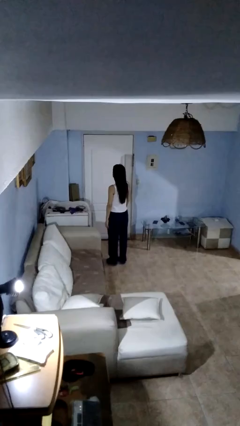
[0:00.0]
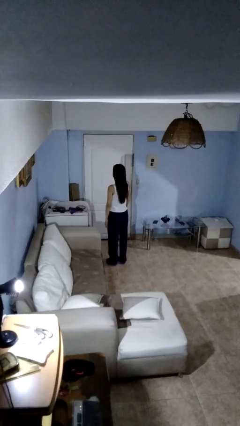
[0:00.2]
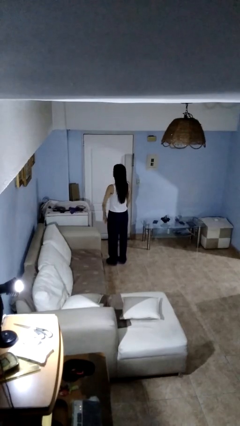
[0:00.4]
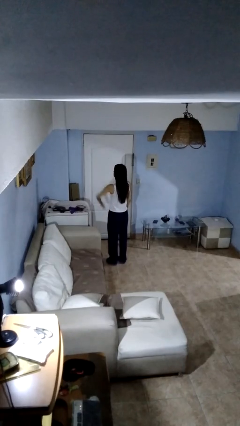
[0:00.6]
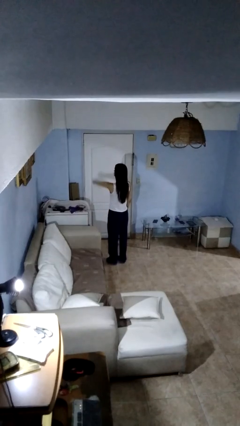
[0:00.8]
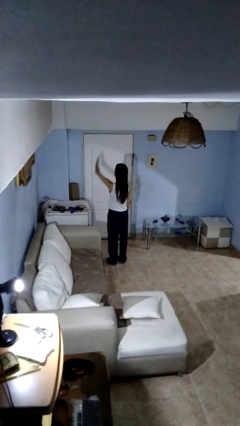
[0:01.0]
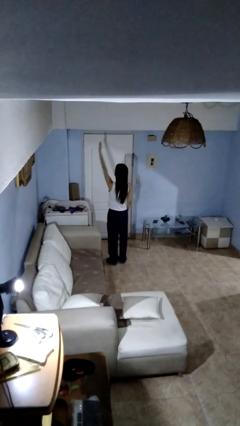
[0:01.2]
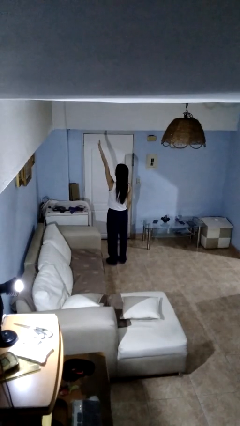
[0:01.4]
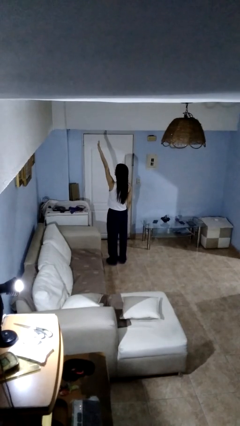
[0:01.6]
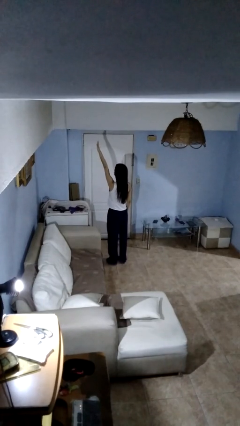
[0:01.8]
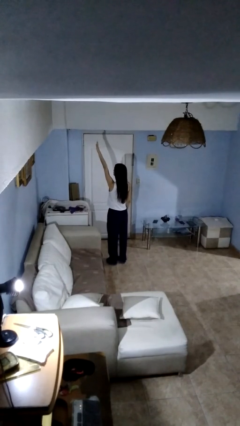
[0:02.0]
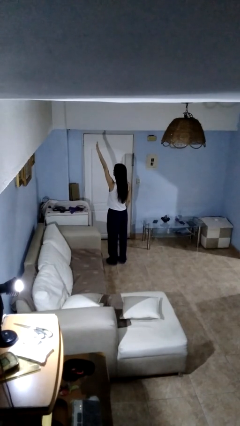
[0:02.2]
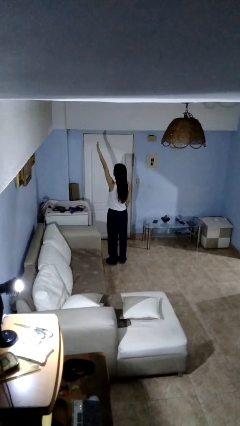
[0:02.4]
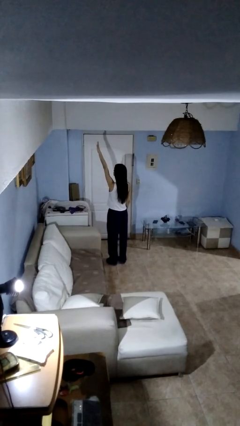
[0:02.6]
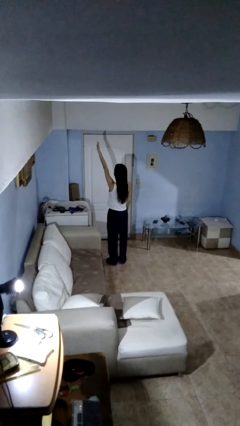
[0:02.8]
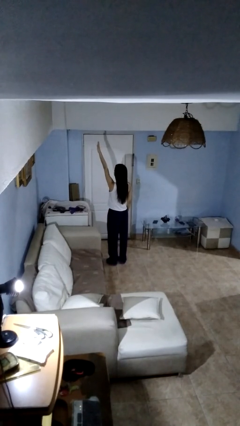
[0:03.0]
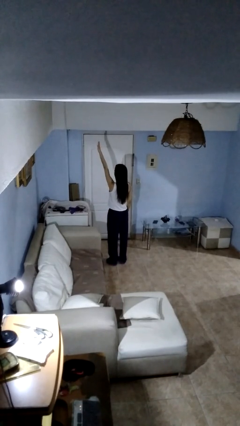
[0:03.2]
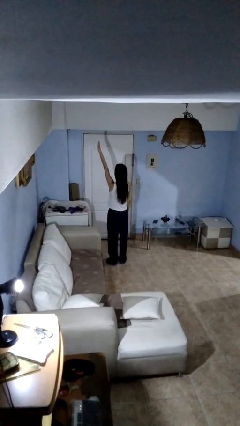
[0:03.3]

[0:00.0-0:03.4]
person gestures swipe up

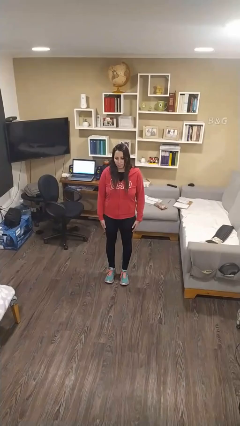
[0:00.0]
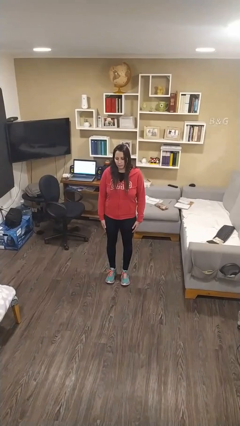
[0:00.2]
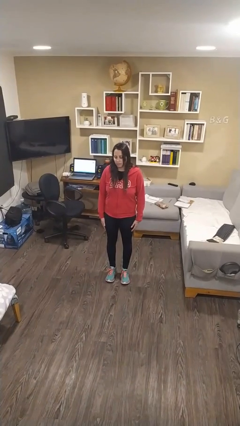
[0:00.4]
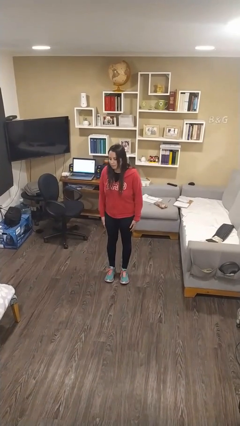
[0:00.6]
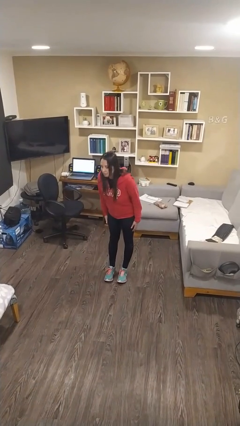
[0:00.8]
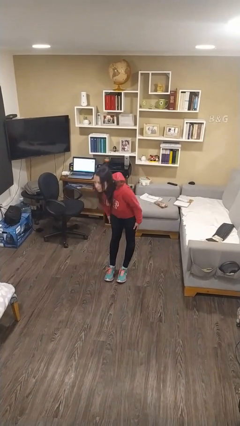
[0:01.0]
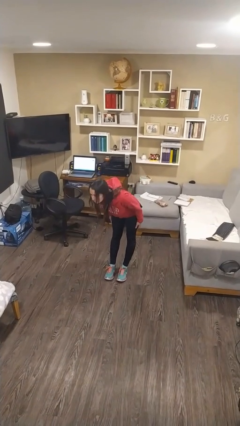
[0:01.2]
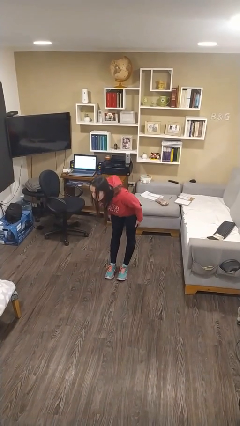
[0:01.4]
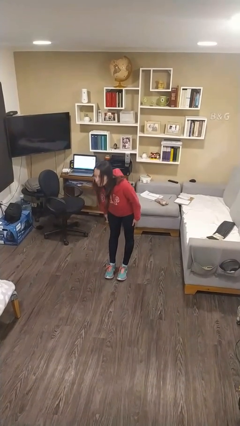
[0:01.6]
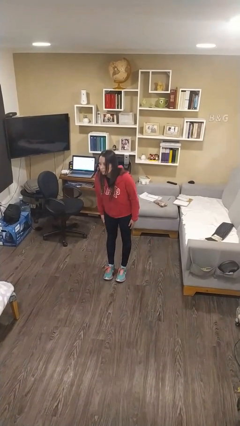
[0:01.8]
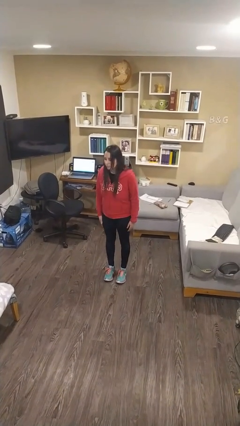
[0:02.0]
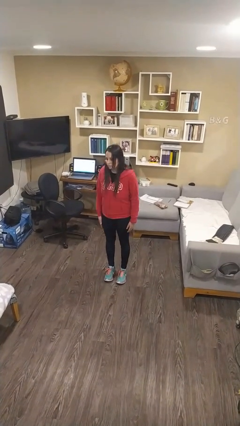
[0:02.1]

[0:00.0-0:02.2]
person bows

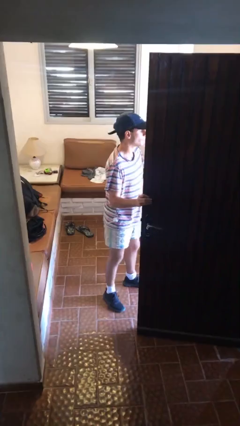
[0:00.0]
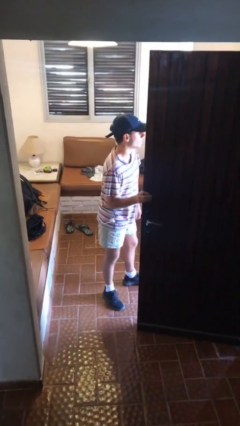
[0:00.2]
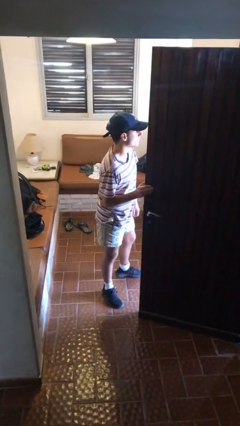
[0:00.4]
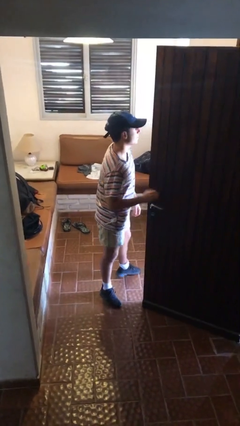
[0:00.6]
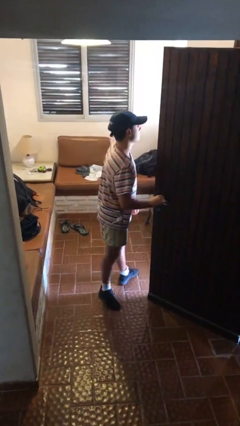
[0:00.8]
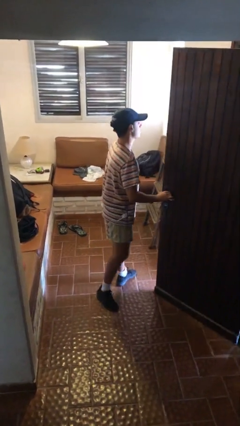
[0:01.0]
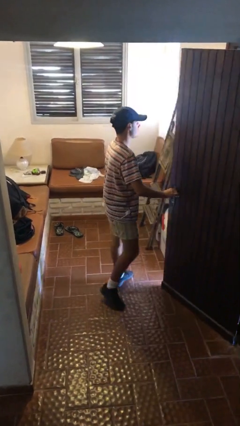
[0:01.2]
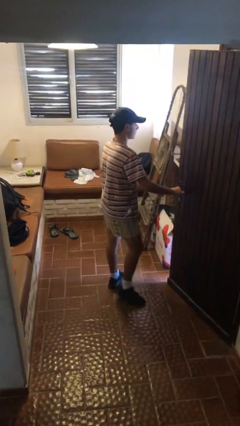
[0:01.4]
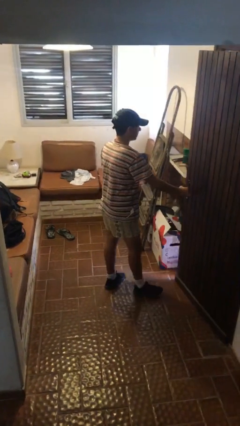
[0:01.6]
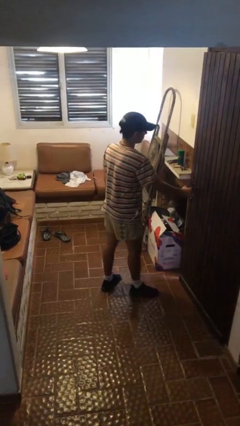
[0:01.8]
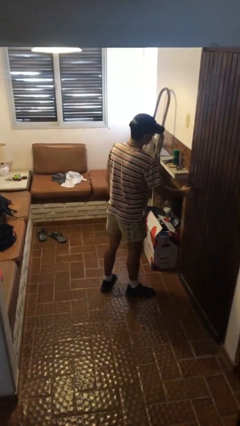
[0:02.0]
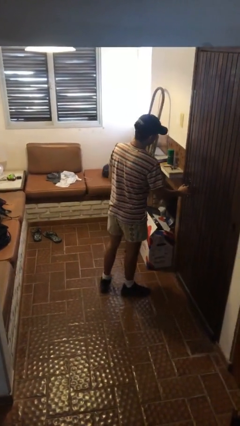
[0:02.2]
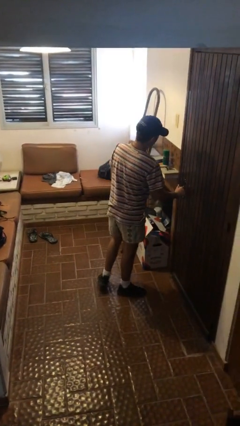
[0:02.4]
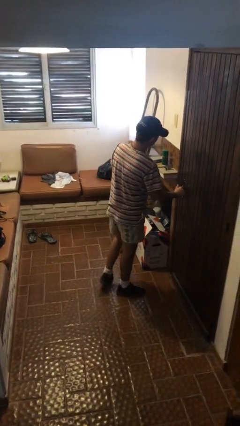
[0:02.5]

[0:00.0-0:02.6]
person closes facility door

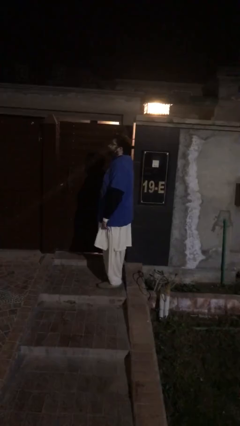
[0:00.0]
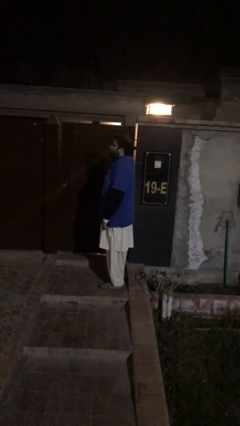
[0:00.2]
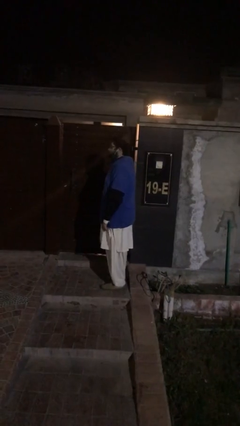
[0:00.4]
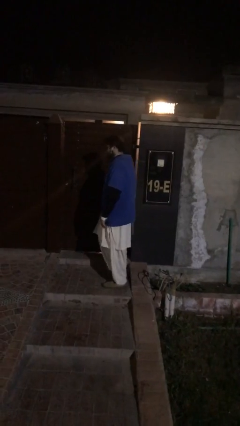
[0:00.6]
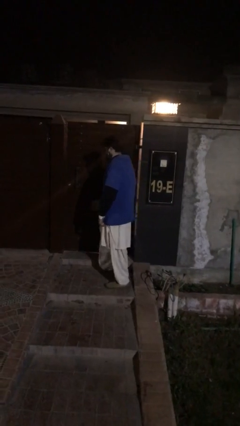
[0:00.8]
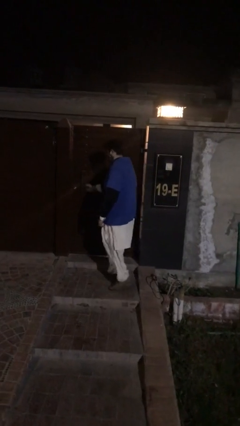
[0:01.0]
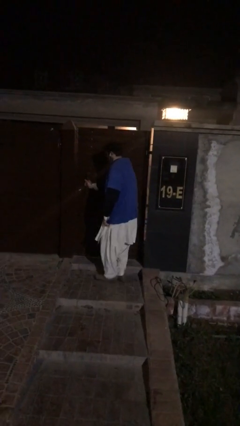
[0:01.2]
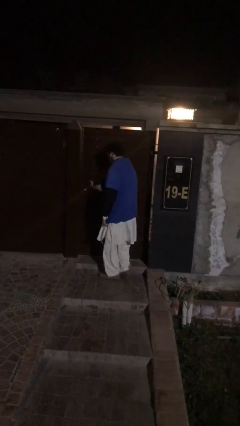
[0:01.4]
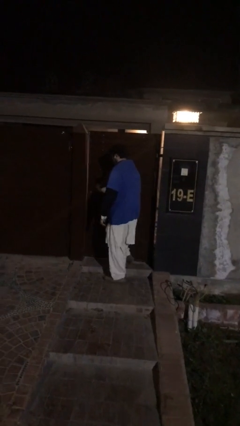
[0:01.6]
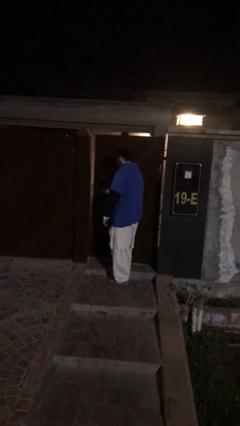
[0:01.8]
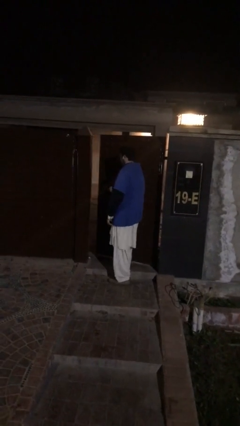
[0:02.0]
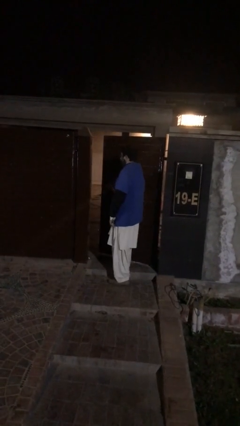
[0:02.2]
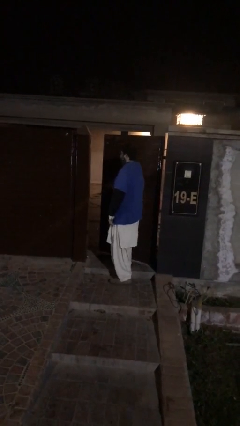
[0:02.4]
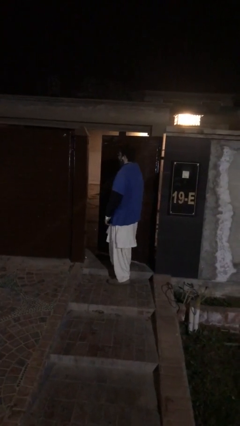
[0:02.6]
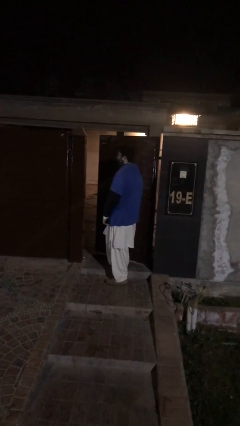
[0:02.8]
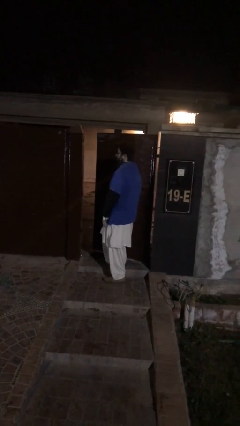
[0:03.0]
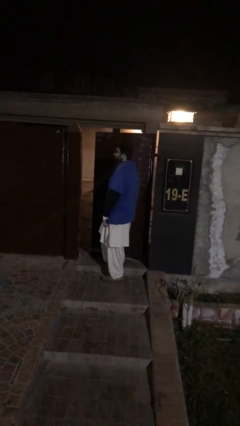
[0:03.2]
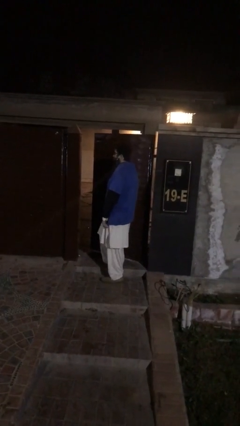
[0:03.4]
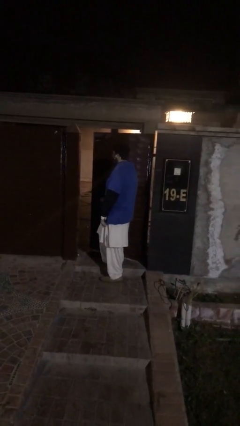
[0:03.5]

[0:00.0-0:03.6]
person opens facility door

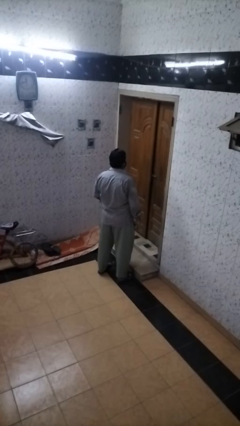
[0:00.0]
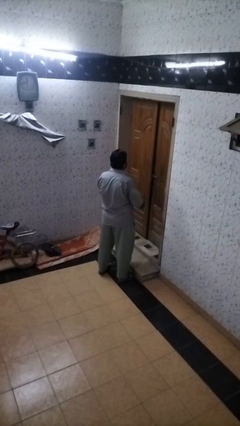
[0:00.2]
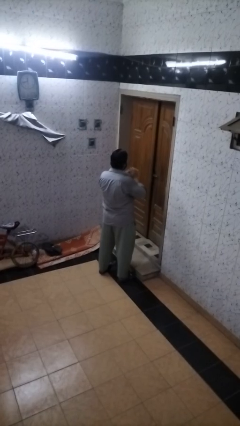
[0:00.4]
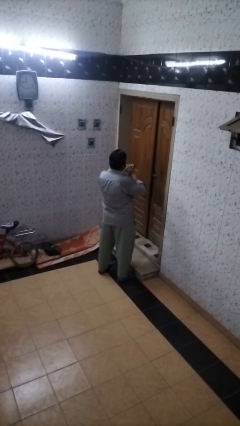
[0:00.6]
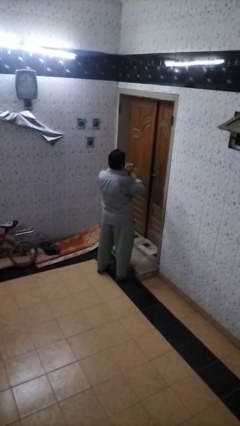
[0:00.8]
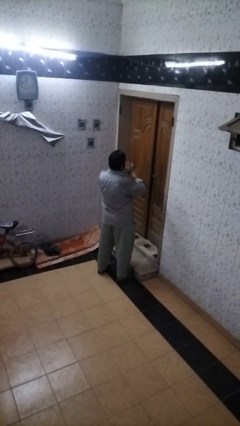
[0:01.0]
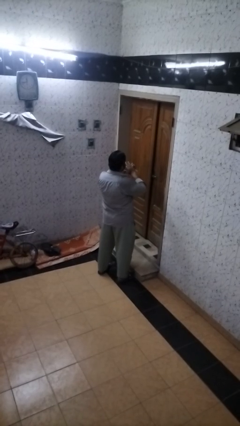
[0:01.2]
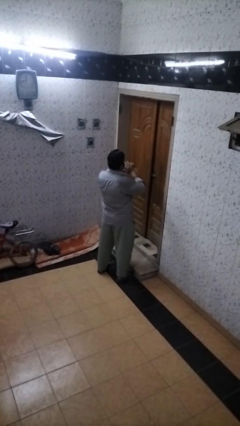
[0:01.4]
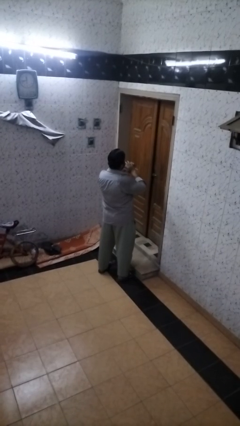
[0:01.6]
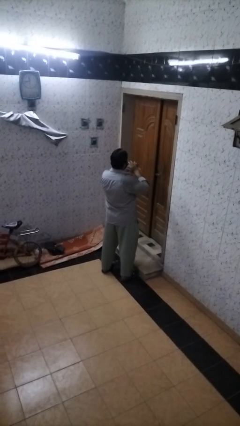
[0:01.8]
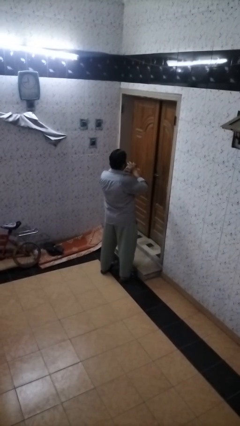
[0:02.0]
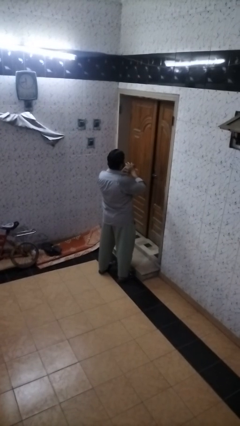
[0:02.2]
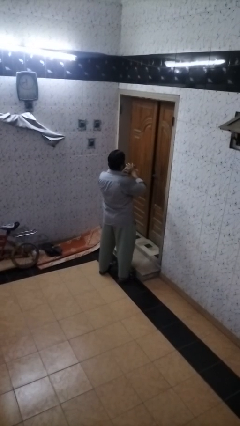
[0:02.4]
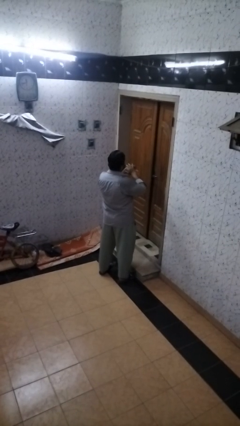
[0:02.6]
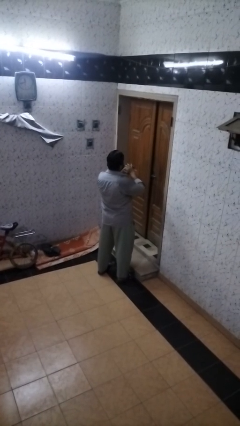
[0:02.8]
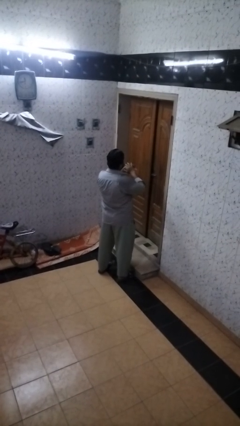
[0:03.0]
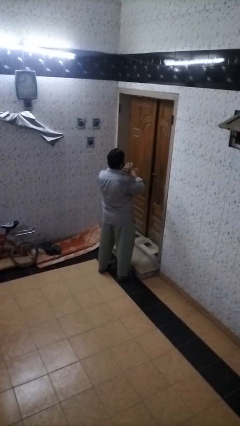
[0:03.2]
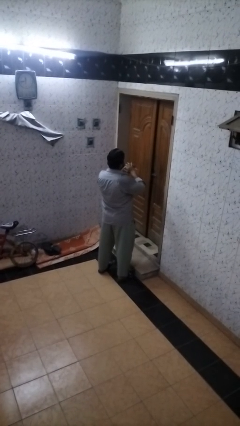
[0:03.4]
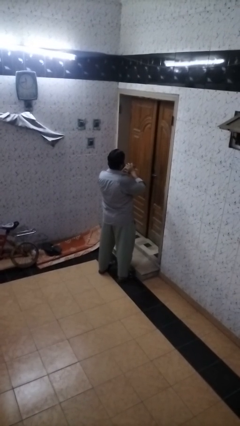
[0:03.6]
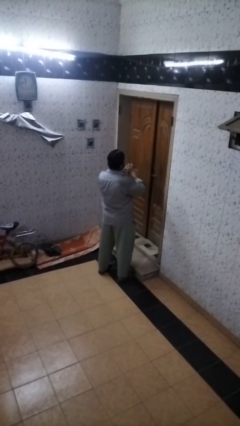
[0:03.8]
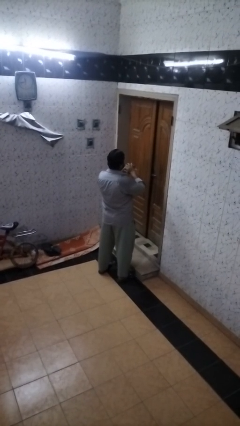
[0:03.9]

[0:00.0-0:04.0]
person puts on ring

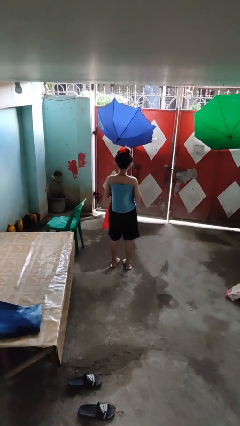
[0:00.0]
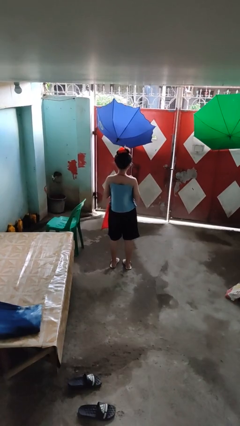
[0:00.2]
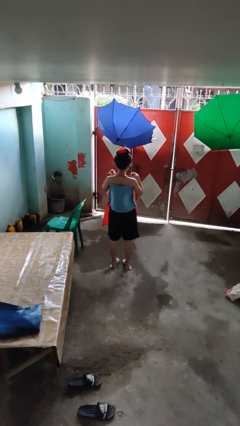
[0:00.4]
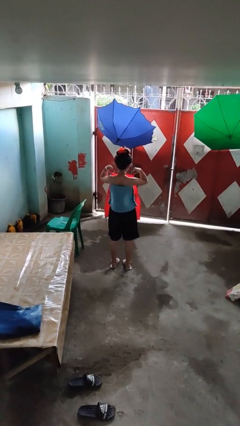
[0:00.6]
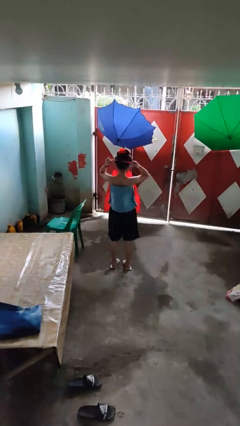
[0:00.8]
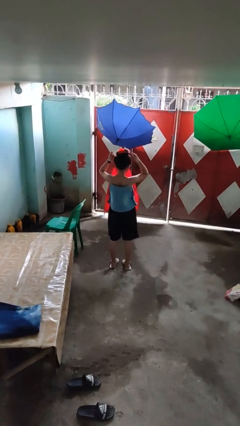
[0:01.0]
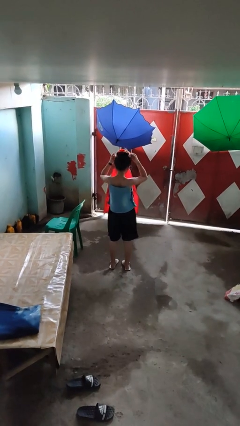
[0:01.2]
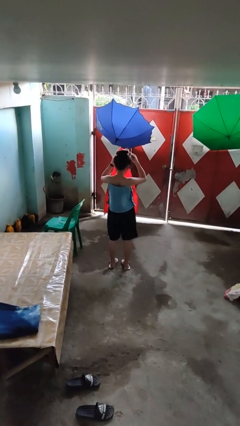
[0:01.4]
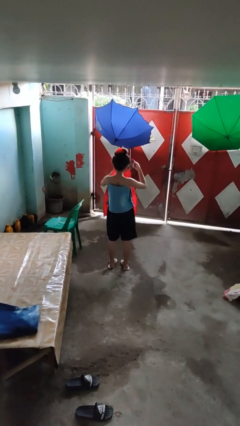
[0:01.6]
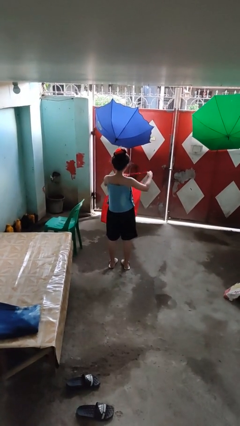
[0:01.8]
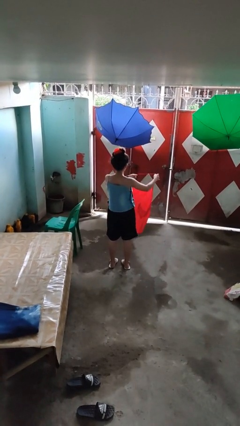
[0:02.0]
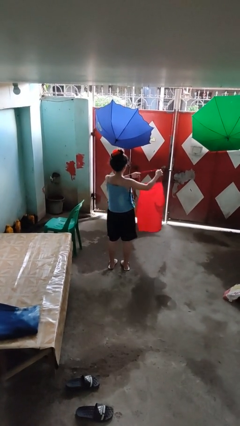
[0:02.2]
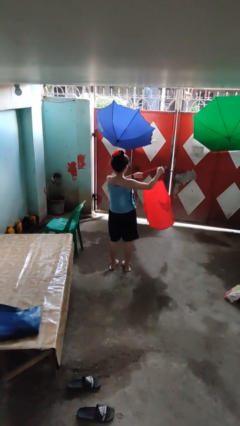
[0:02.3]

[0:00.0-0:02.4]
person takes off apron
